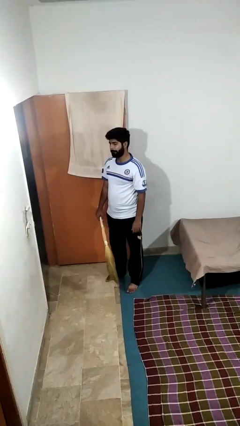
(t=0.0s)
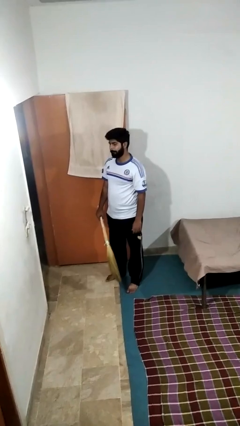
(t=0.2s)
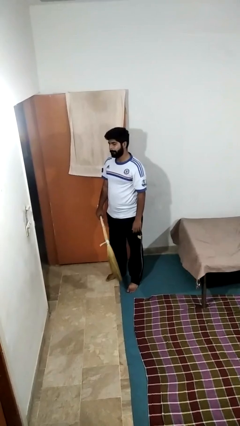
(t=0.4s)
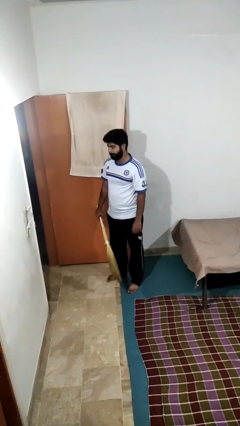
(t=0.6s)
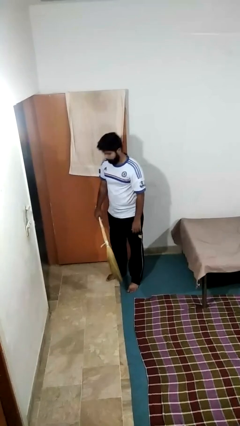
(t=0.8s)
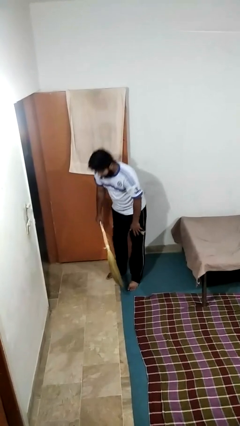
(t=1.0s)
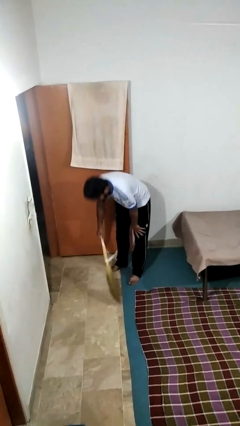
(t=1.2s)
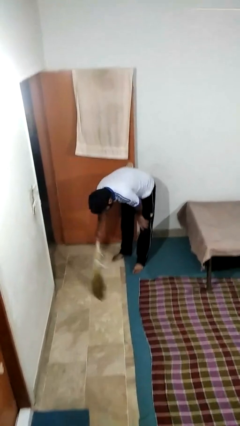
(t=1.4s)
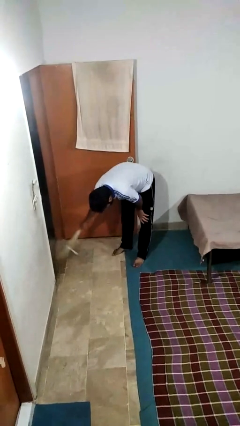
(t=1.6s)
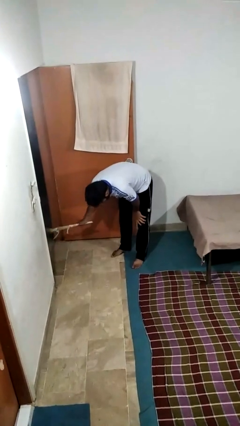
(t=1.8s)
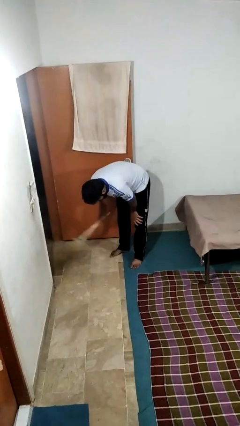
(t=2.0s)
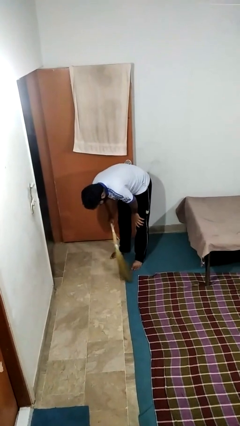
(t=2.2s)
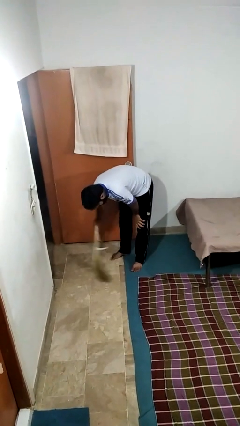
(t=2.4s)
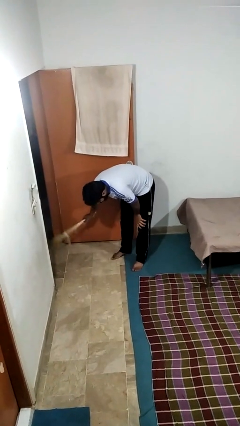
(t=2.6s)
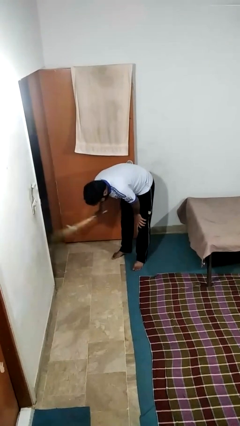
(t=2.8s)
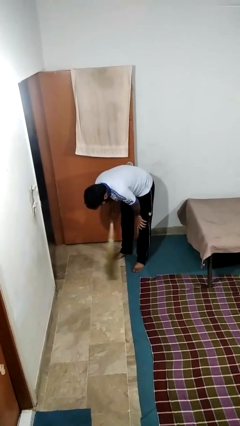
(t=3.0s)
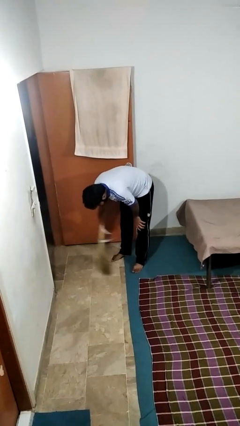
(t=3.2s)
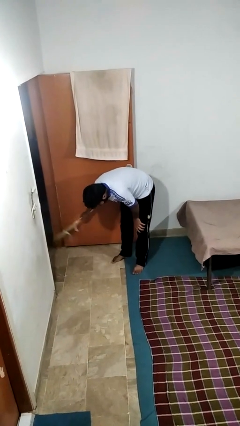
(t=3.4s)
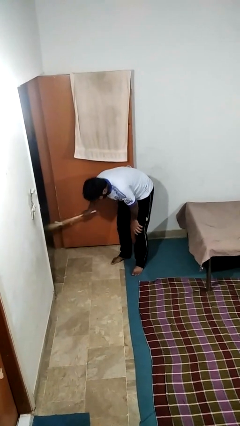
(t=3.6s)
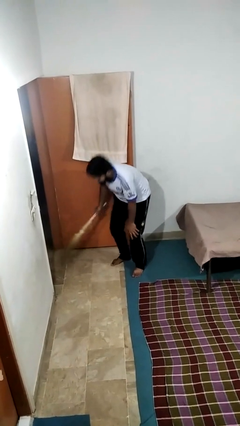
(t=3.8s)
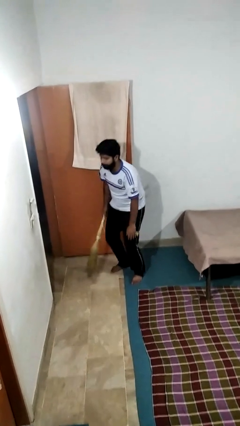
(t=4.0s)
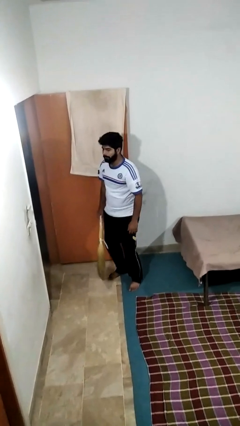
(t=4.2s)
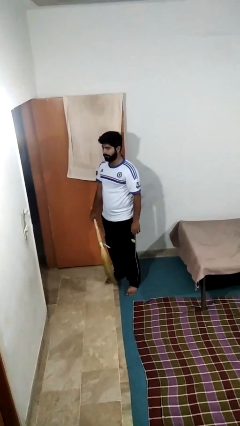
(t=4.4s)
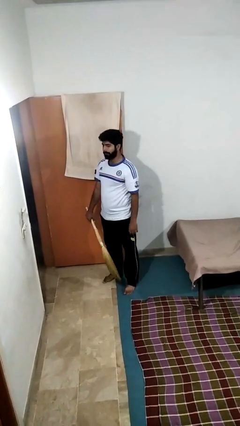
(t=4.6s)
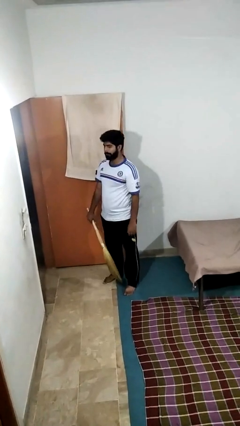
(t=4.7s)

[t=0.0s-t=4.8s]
person sweeps floor

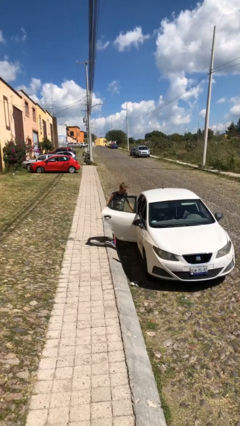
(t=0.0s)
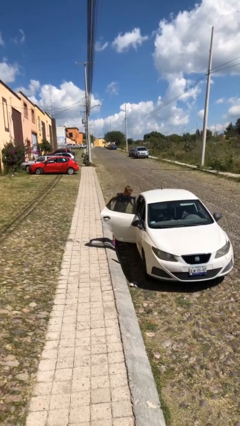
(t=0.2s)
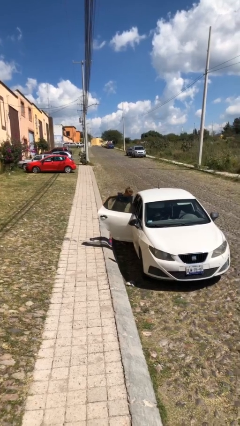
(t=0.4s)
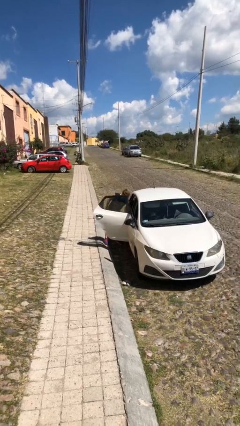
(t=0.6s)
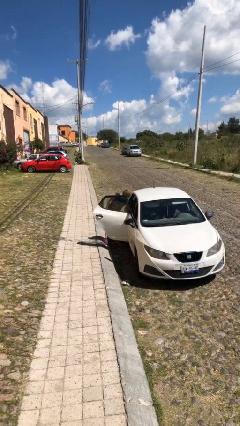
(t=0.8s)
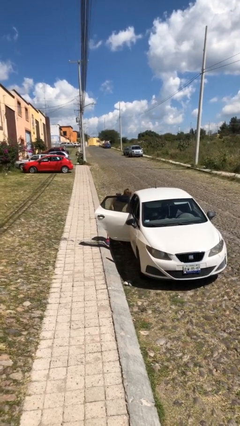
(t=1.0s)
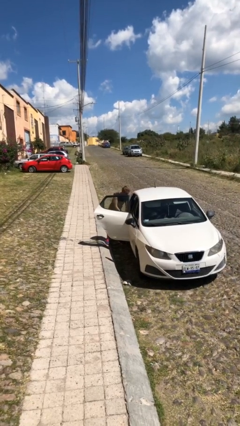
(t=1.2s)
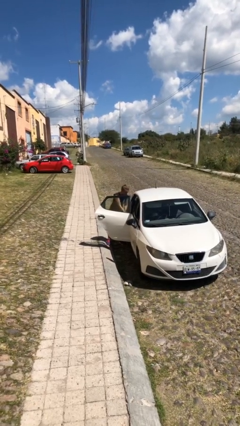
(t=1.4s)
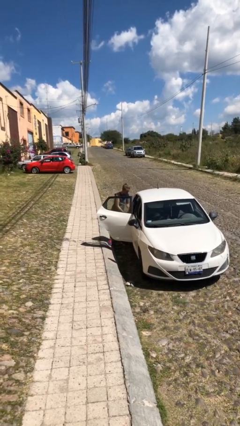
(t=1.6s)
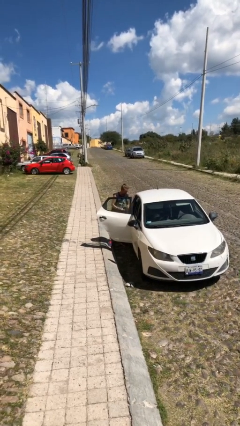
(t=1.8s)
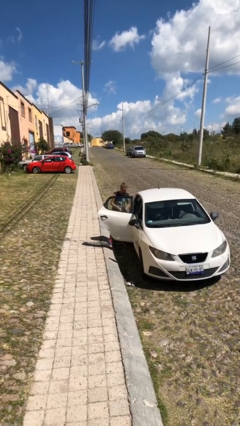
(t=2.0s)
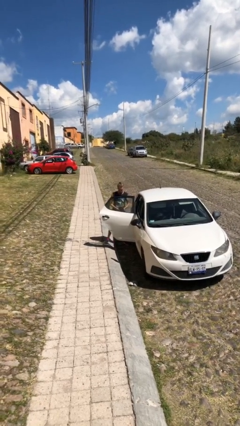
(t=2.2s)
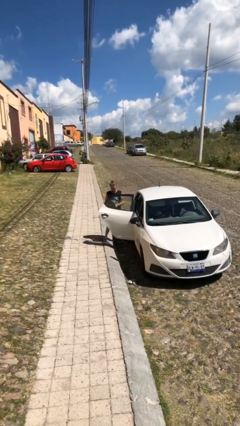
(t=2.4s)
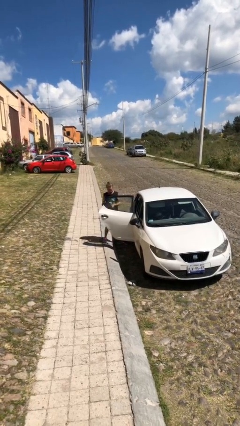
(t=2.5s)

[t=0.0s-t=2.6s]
person unloads car

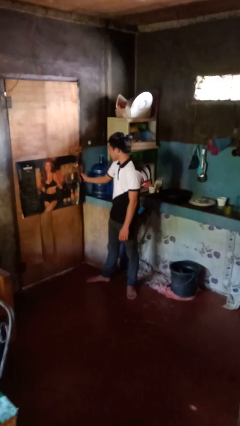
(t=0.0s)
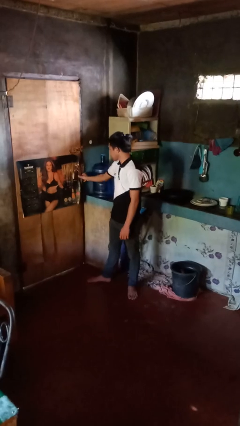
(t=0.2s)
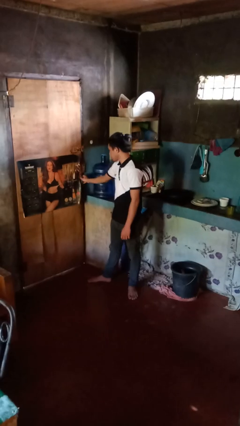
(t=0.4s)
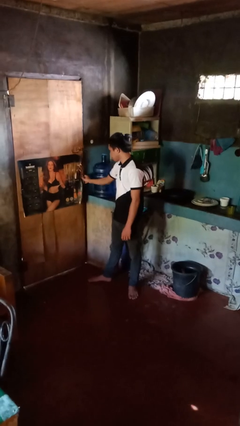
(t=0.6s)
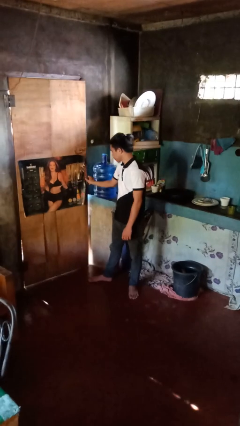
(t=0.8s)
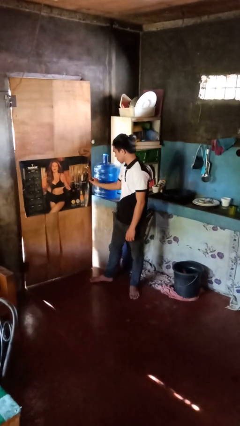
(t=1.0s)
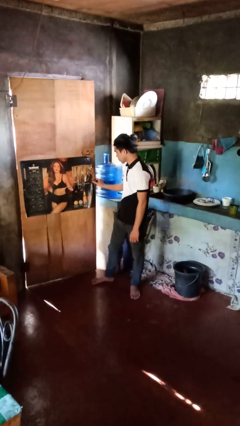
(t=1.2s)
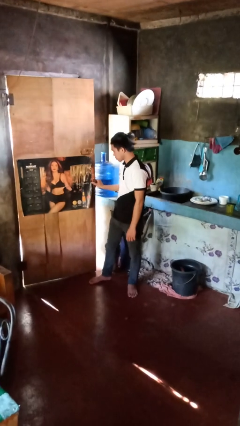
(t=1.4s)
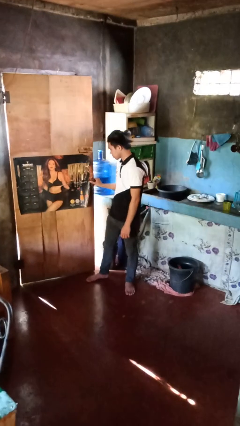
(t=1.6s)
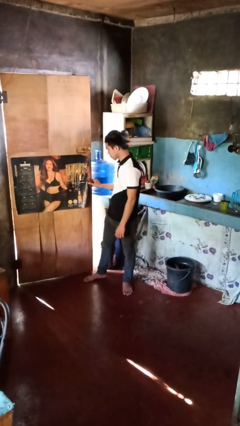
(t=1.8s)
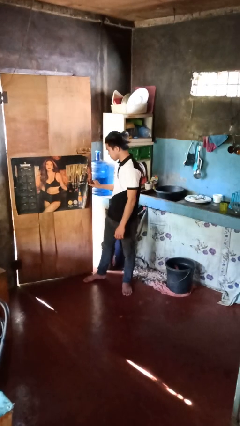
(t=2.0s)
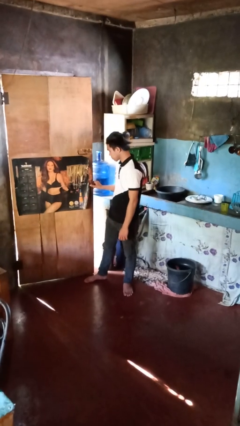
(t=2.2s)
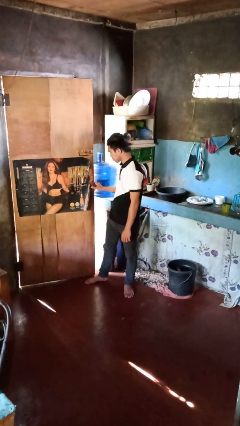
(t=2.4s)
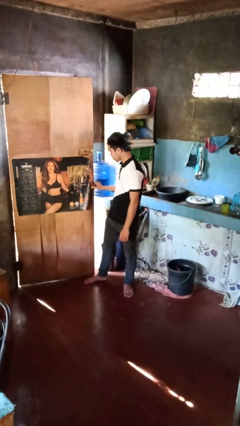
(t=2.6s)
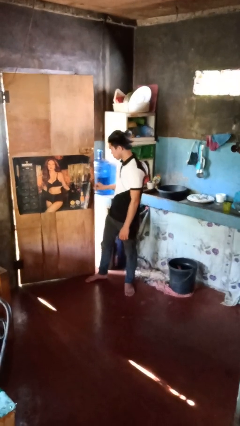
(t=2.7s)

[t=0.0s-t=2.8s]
person opens facility door

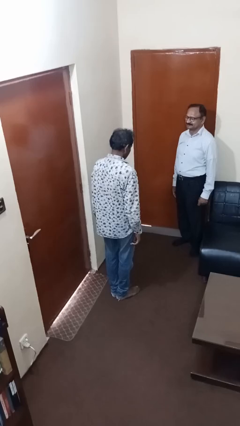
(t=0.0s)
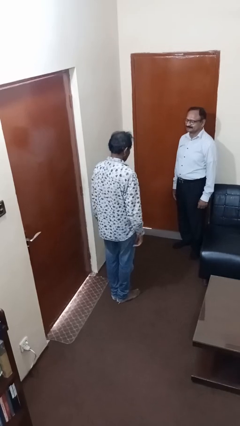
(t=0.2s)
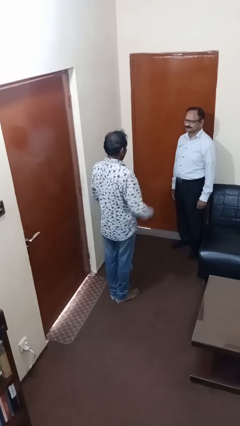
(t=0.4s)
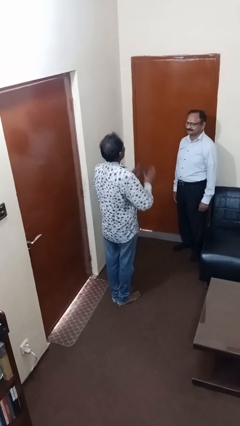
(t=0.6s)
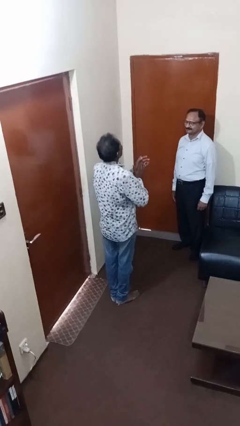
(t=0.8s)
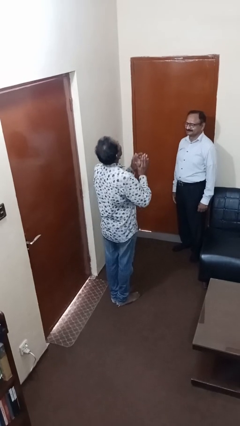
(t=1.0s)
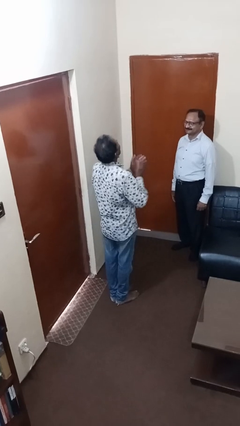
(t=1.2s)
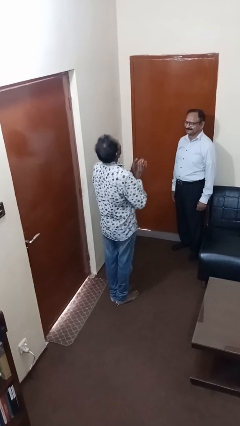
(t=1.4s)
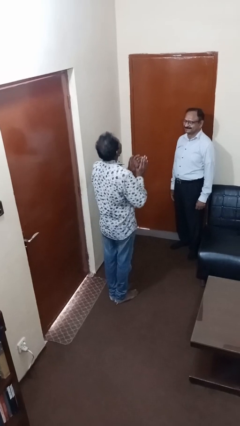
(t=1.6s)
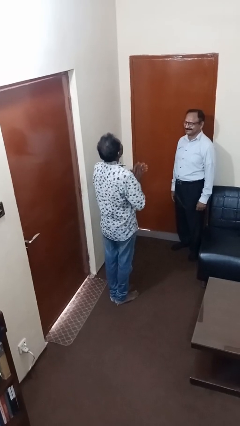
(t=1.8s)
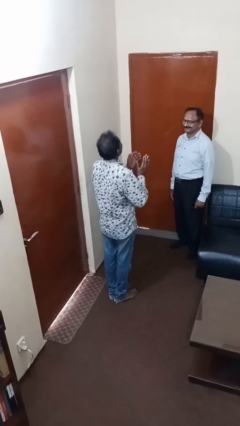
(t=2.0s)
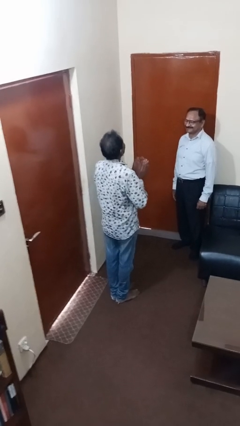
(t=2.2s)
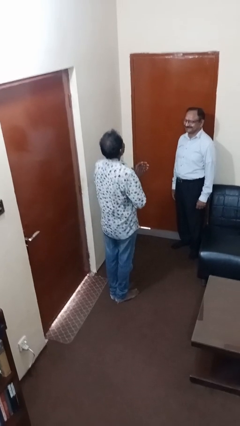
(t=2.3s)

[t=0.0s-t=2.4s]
person laughs with person

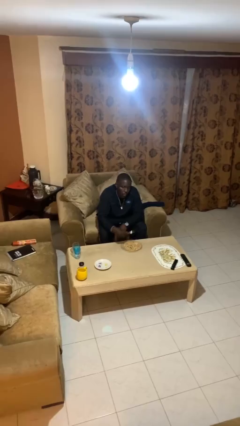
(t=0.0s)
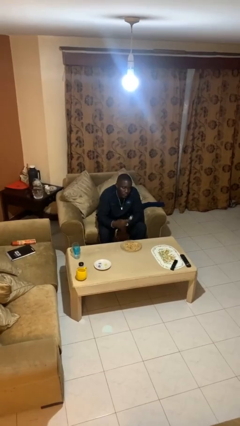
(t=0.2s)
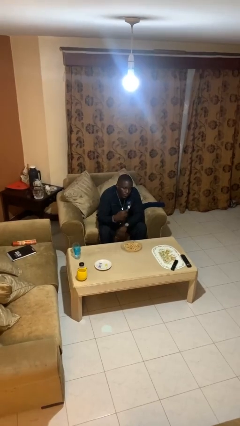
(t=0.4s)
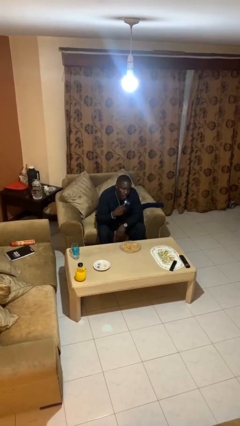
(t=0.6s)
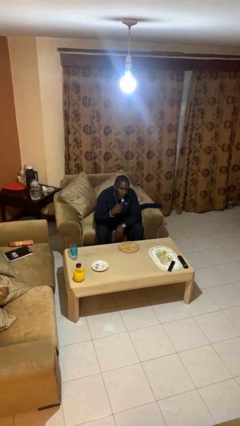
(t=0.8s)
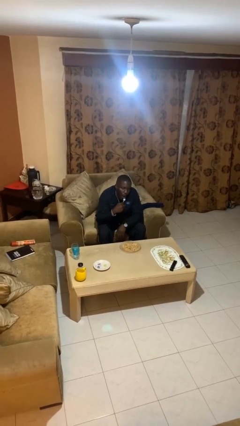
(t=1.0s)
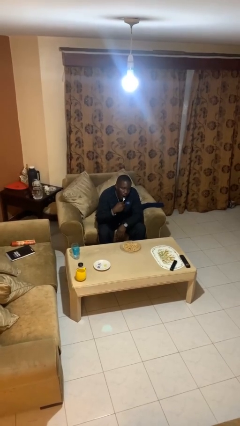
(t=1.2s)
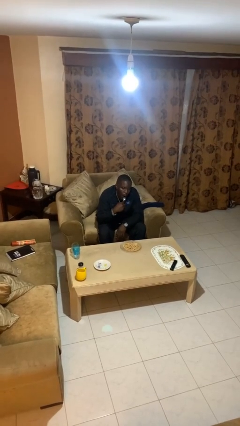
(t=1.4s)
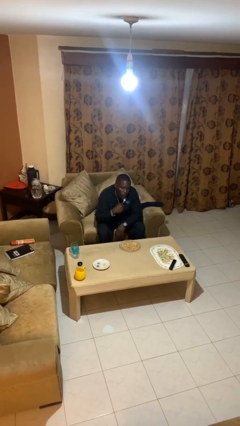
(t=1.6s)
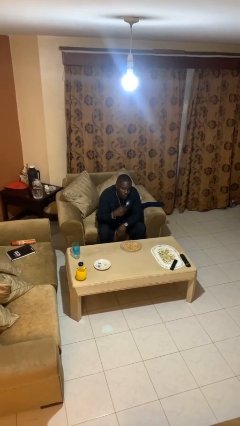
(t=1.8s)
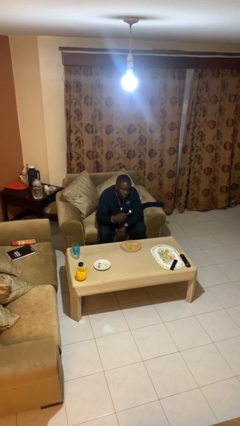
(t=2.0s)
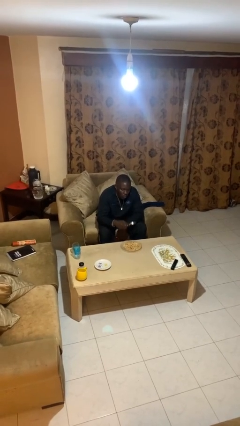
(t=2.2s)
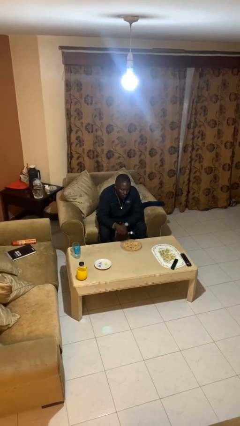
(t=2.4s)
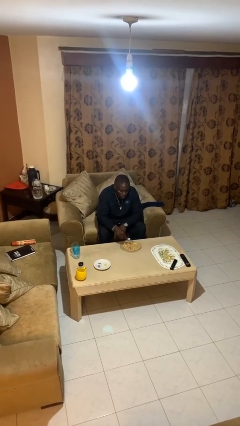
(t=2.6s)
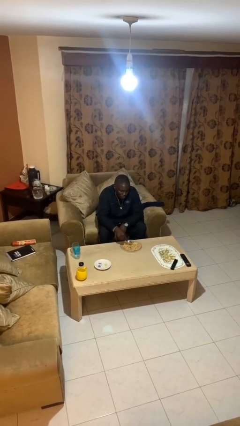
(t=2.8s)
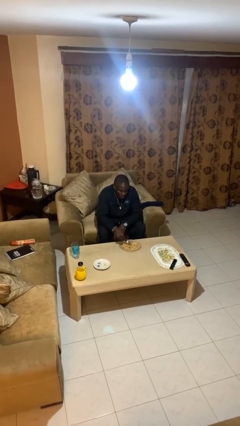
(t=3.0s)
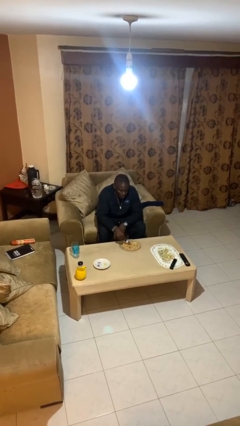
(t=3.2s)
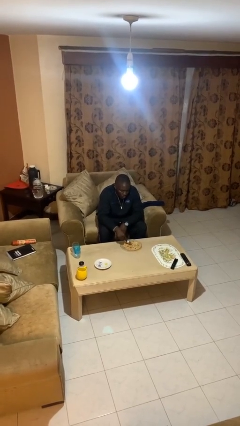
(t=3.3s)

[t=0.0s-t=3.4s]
person eats with utensil

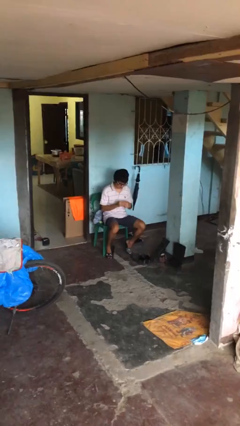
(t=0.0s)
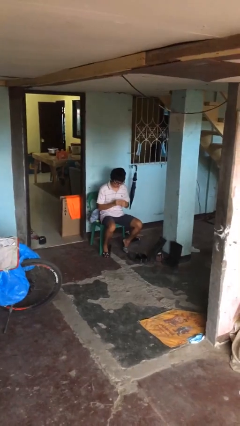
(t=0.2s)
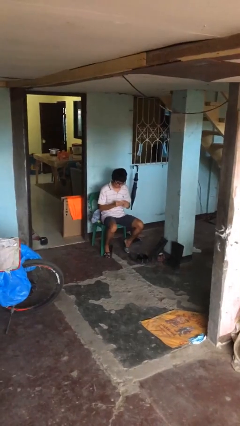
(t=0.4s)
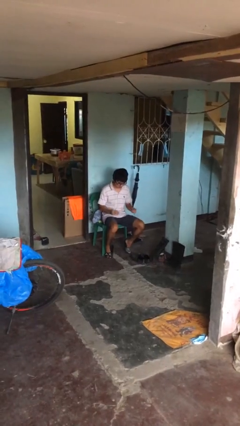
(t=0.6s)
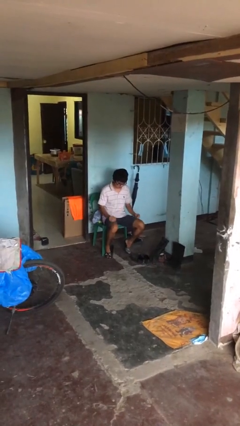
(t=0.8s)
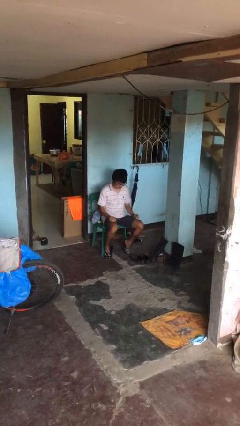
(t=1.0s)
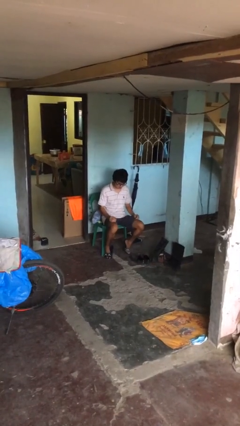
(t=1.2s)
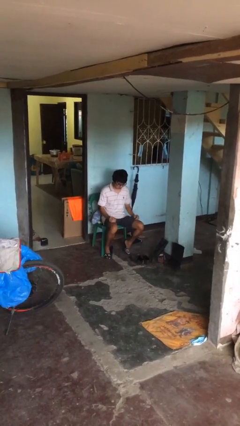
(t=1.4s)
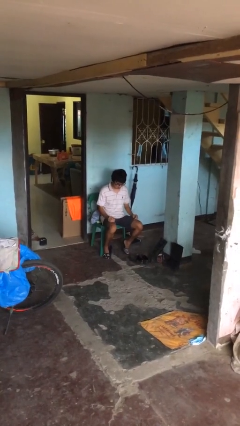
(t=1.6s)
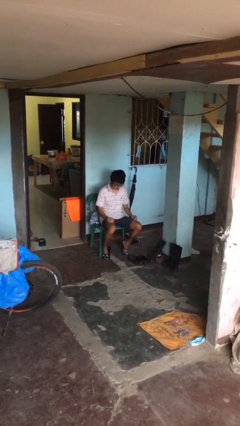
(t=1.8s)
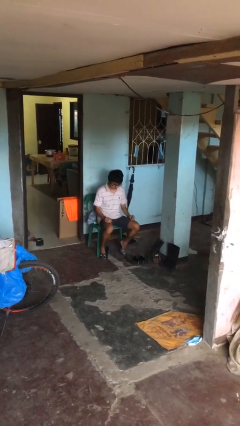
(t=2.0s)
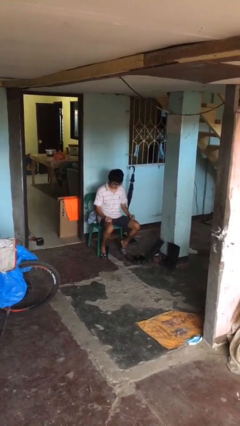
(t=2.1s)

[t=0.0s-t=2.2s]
person takes off ring
